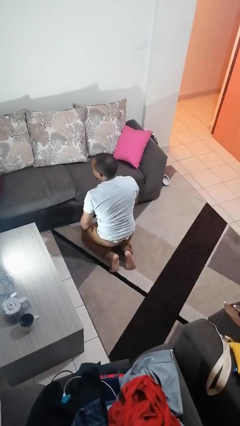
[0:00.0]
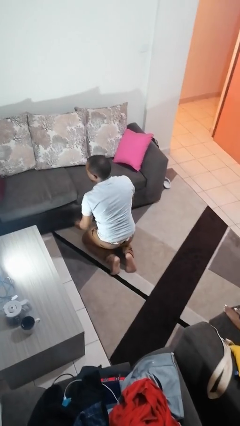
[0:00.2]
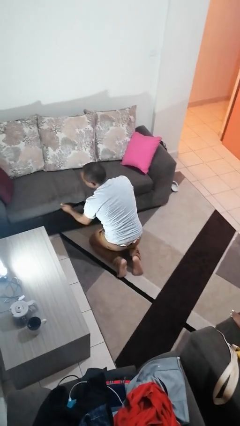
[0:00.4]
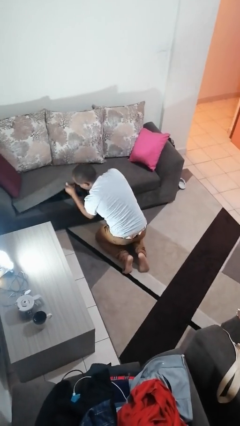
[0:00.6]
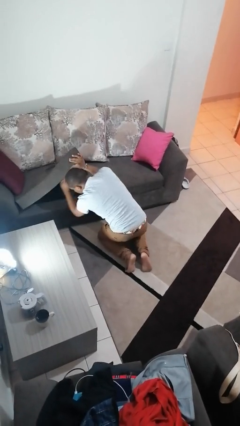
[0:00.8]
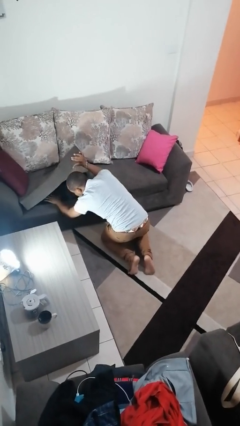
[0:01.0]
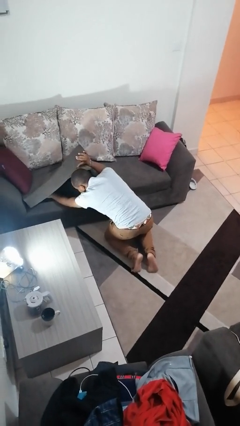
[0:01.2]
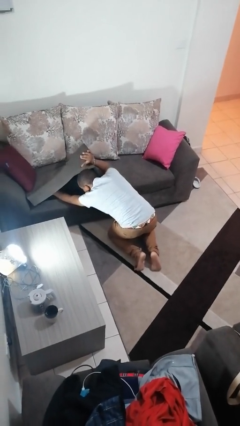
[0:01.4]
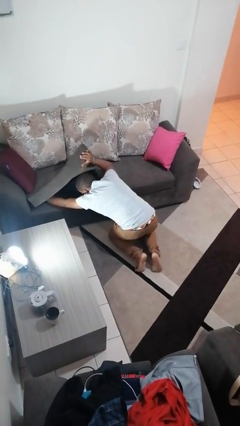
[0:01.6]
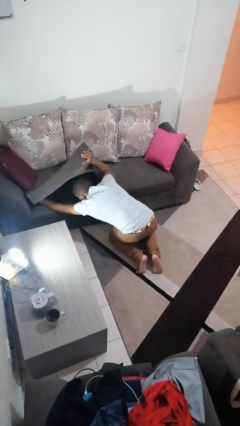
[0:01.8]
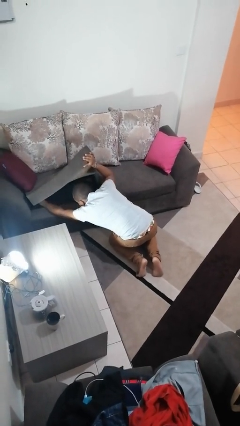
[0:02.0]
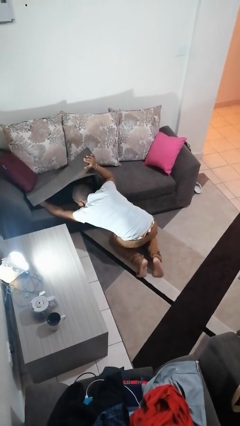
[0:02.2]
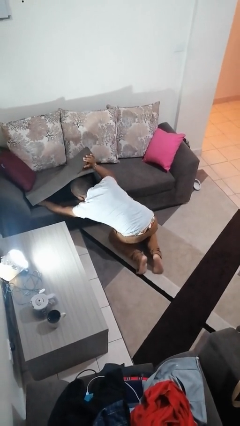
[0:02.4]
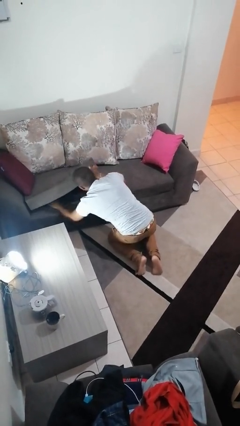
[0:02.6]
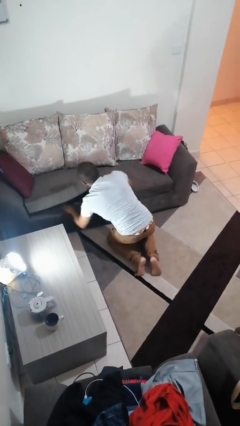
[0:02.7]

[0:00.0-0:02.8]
person searches under couch

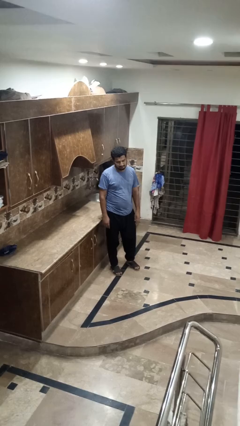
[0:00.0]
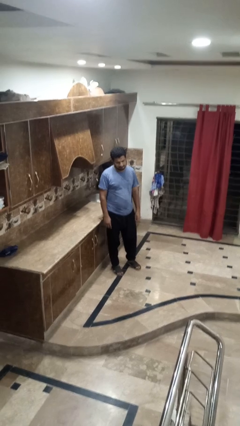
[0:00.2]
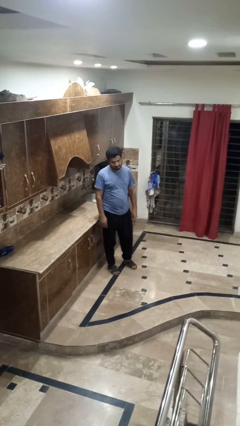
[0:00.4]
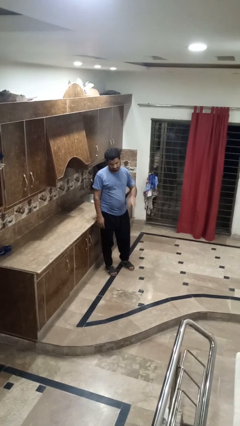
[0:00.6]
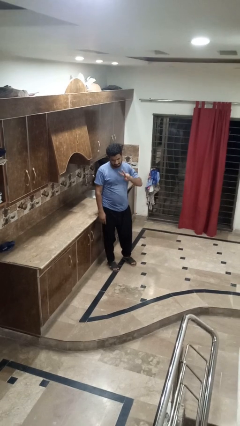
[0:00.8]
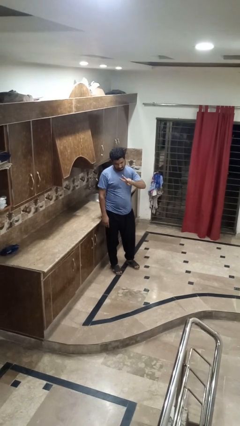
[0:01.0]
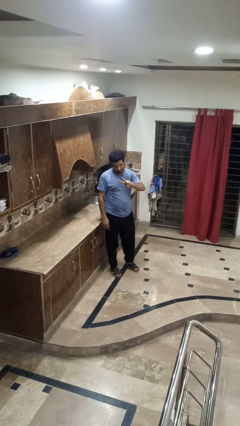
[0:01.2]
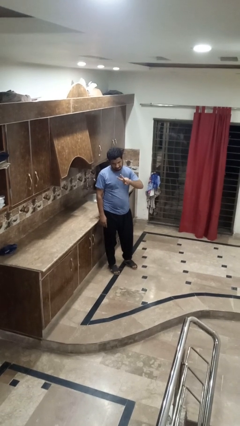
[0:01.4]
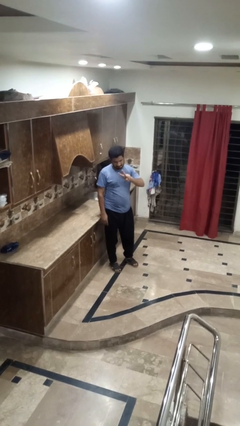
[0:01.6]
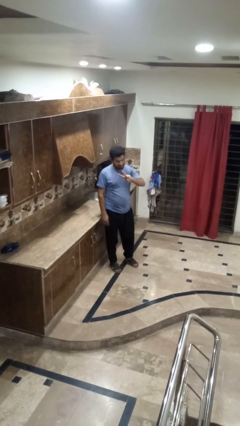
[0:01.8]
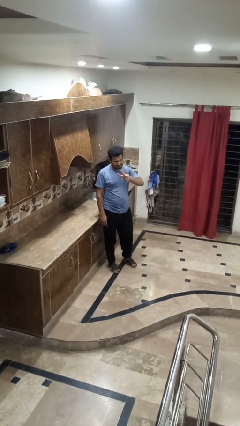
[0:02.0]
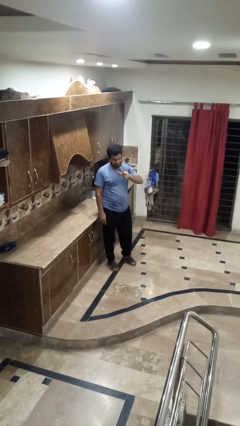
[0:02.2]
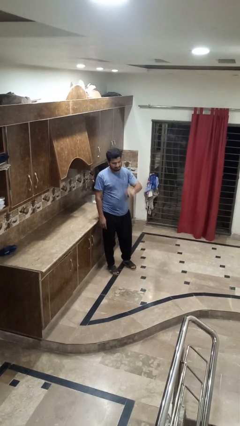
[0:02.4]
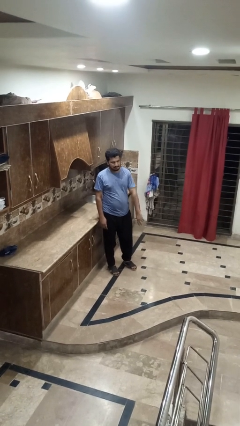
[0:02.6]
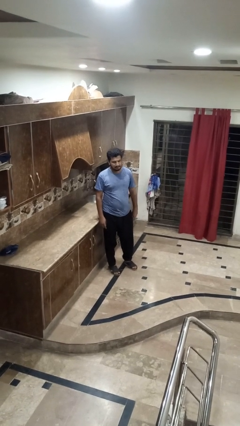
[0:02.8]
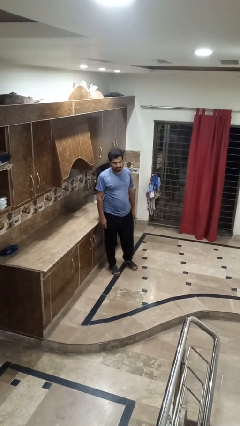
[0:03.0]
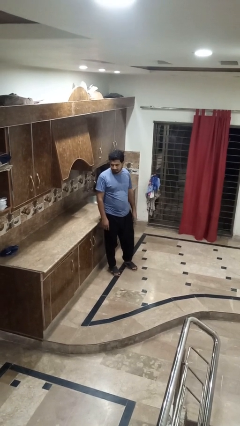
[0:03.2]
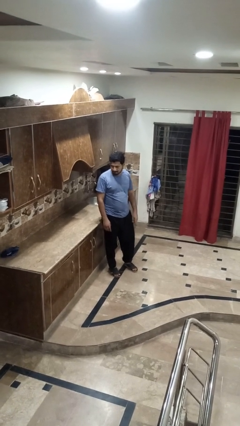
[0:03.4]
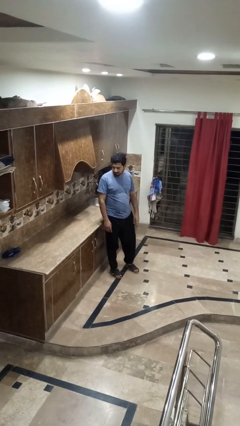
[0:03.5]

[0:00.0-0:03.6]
person gestures peace

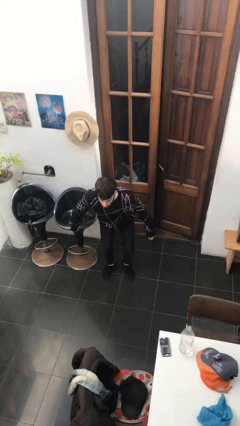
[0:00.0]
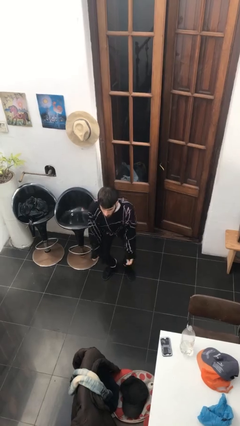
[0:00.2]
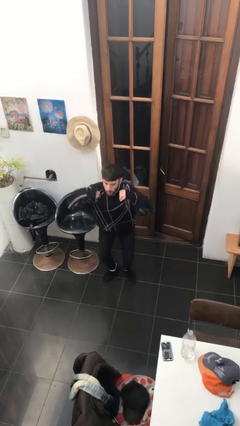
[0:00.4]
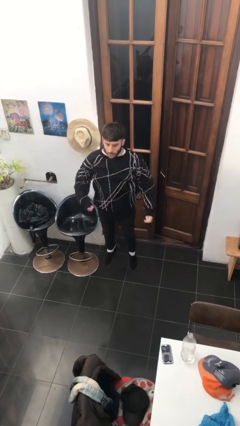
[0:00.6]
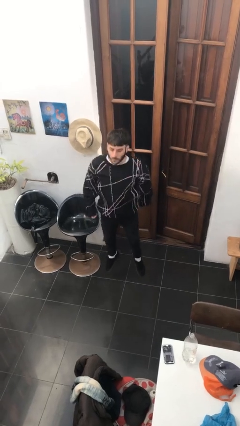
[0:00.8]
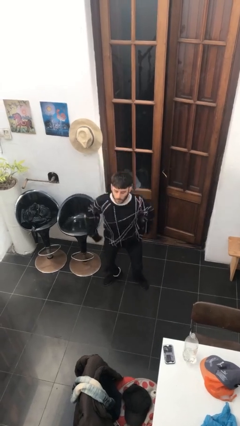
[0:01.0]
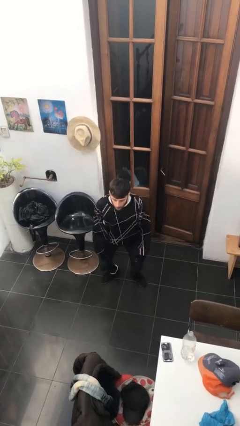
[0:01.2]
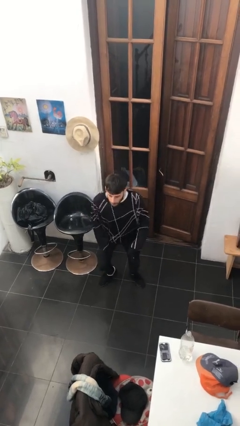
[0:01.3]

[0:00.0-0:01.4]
person jumps

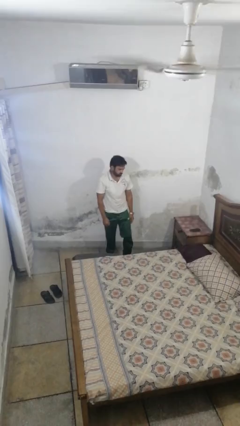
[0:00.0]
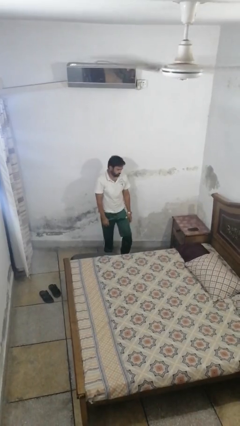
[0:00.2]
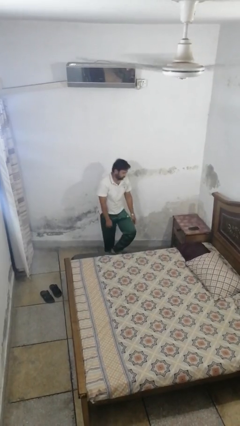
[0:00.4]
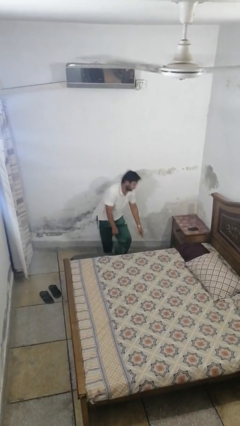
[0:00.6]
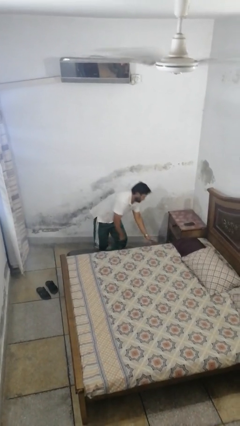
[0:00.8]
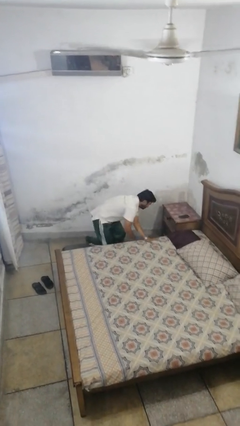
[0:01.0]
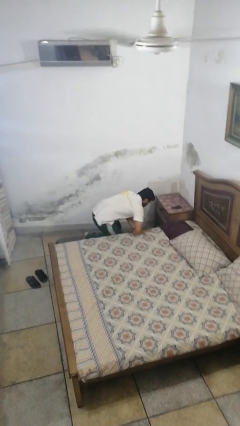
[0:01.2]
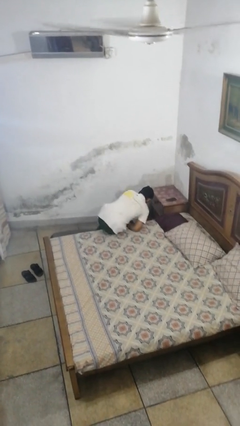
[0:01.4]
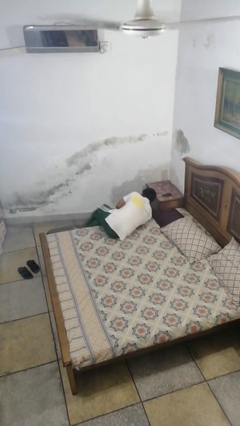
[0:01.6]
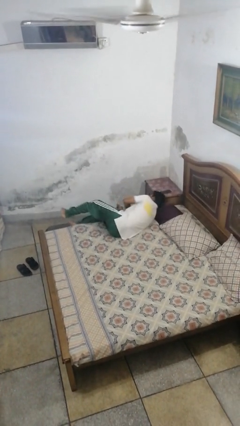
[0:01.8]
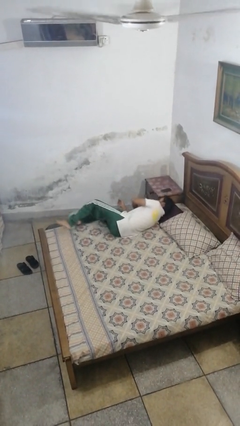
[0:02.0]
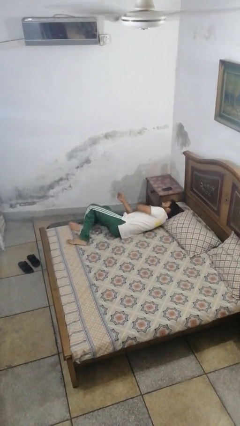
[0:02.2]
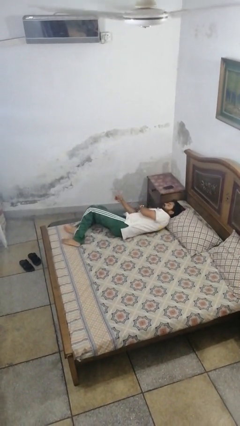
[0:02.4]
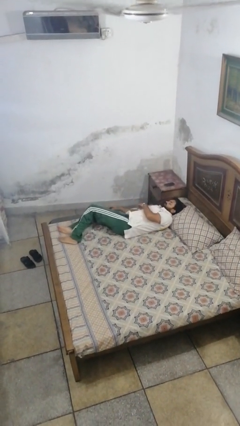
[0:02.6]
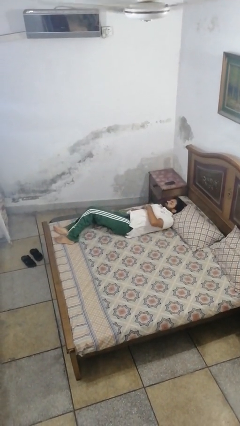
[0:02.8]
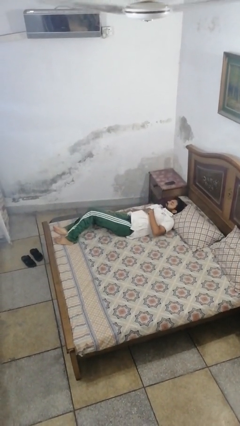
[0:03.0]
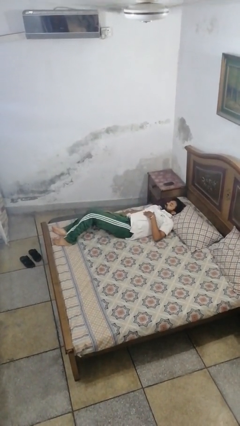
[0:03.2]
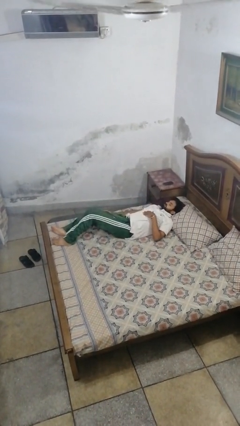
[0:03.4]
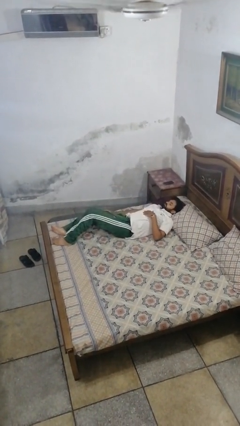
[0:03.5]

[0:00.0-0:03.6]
person lies down on bed

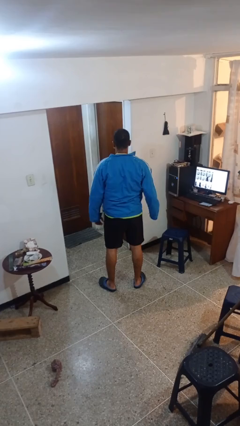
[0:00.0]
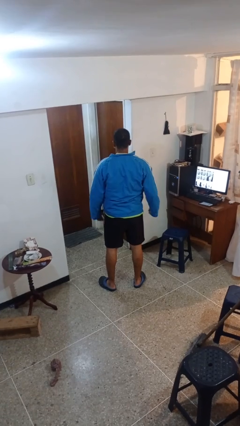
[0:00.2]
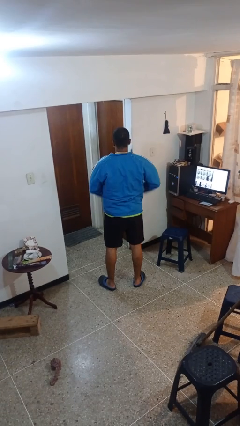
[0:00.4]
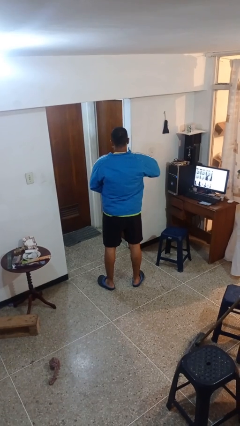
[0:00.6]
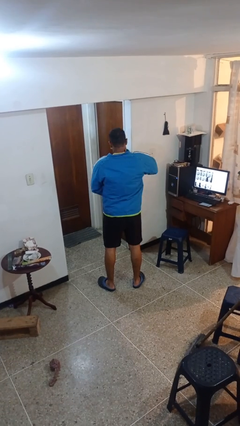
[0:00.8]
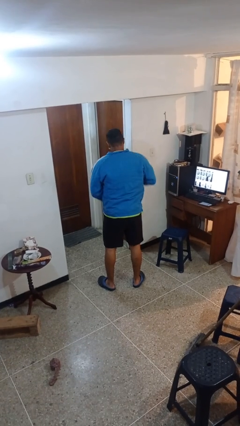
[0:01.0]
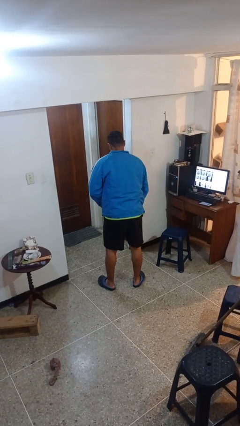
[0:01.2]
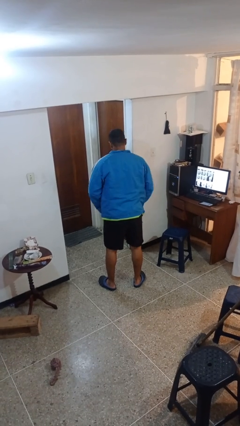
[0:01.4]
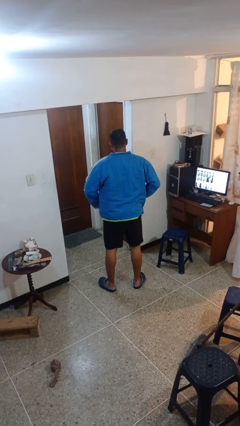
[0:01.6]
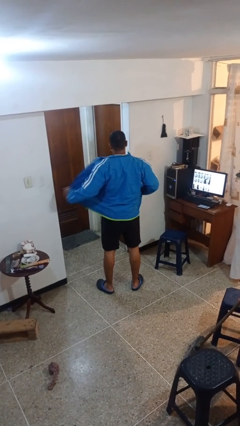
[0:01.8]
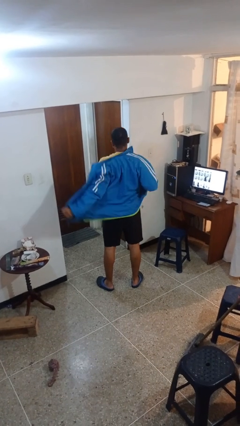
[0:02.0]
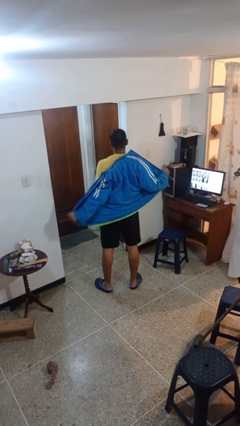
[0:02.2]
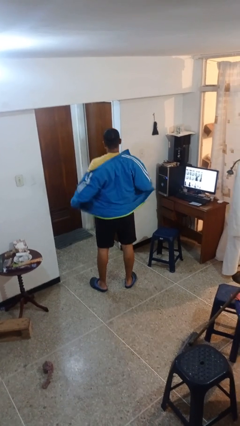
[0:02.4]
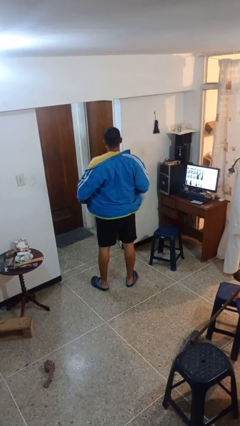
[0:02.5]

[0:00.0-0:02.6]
person unzips jacket

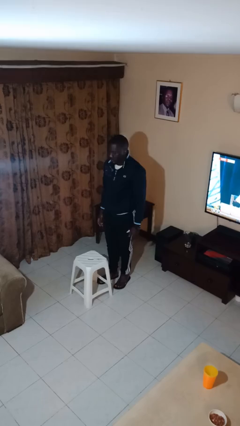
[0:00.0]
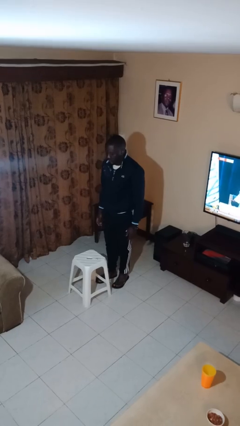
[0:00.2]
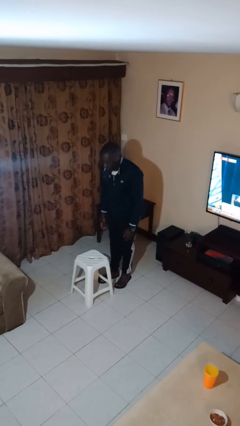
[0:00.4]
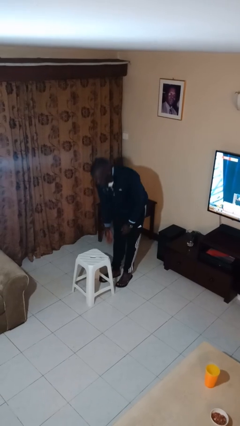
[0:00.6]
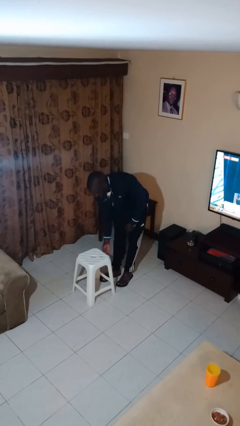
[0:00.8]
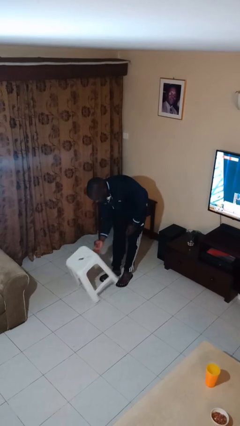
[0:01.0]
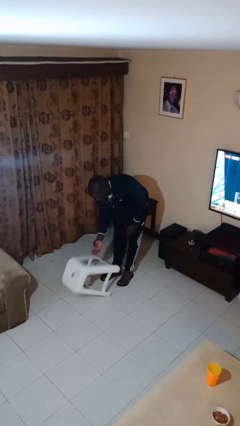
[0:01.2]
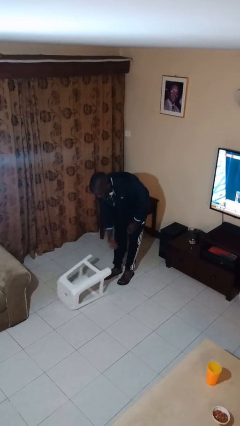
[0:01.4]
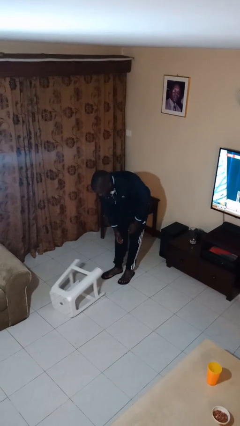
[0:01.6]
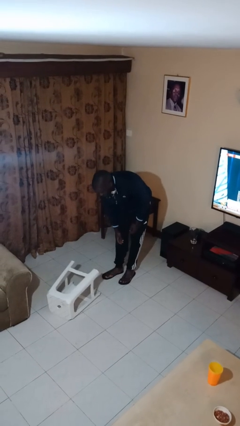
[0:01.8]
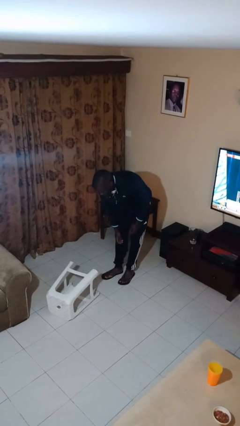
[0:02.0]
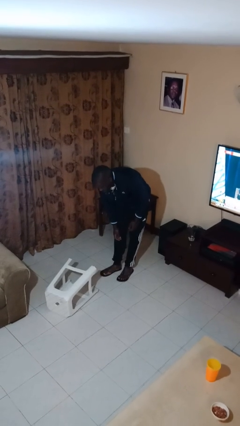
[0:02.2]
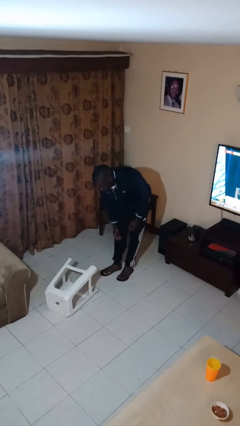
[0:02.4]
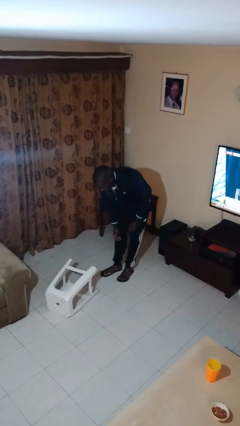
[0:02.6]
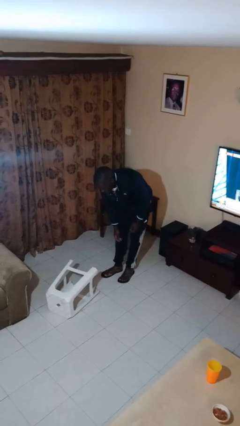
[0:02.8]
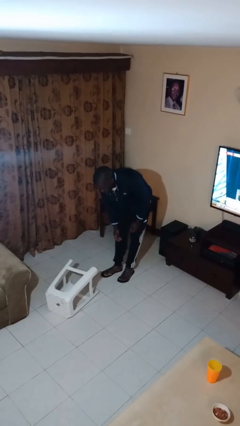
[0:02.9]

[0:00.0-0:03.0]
person knocks over furniture

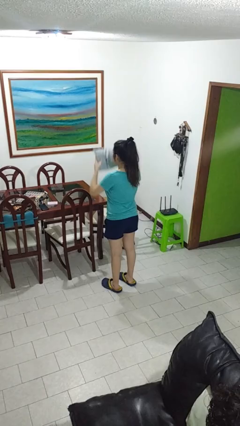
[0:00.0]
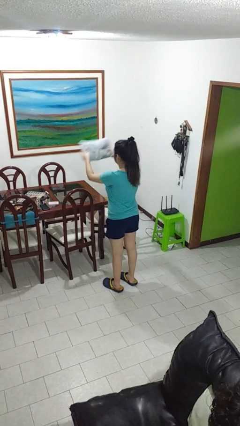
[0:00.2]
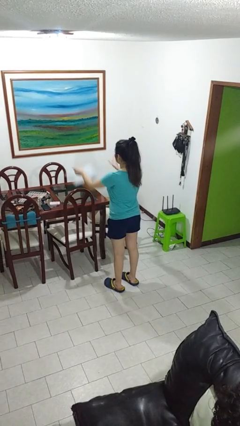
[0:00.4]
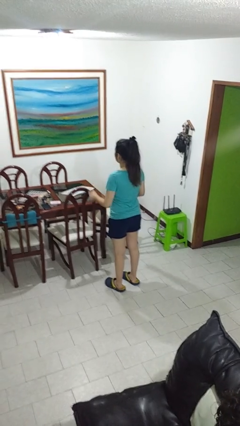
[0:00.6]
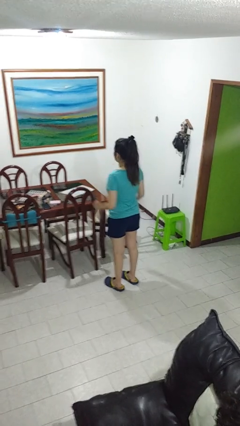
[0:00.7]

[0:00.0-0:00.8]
person throws object on table
